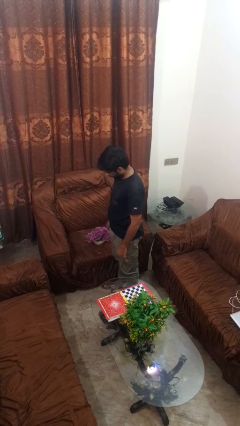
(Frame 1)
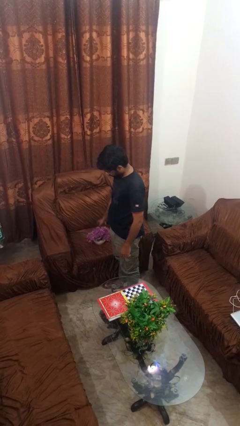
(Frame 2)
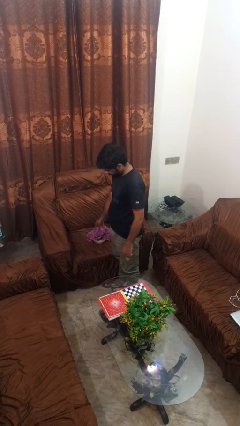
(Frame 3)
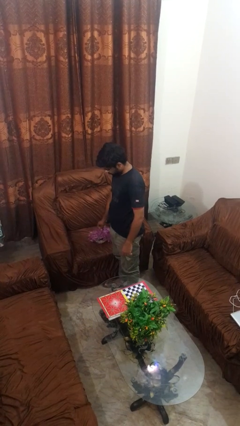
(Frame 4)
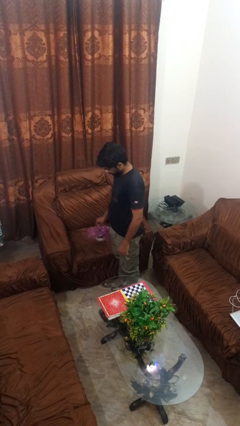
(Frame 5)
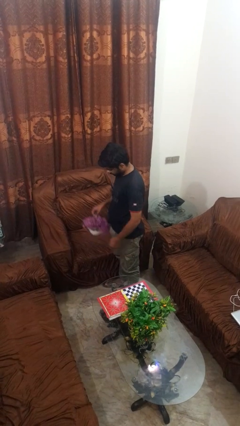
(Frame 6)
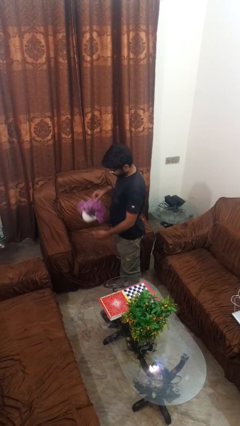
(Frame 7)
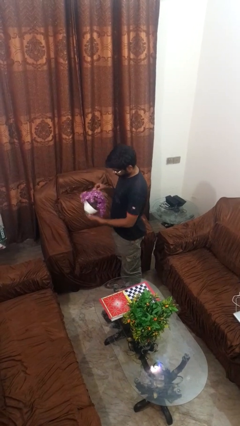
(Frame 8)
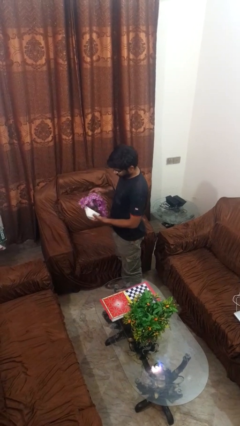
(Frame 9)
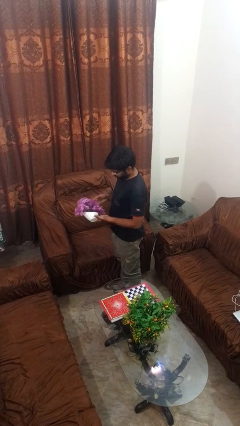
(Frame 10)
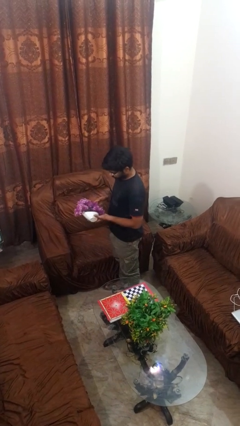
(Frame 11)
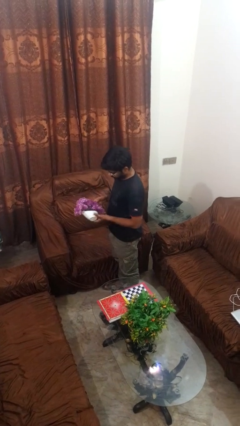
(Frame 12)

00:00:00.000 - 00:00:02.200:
person picks up object from couch

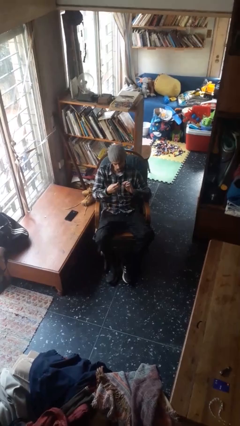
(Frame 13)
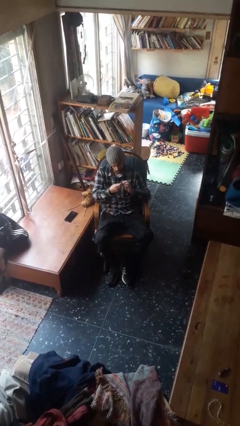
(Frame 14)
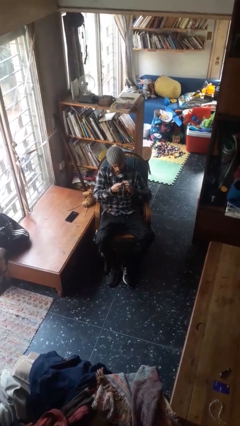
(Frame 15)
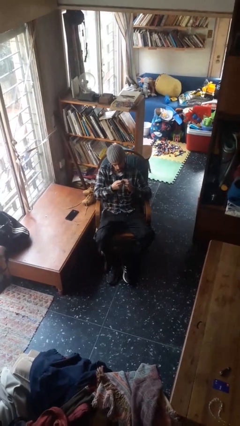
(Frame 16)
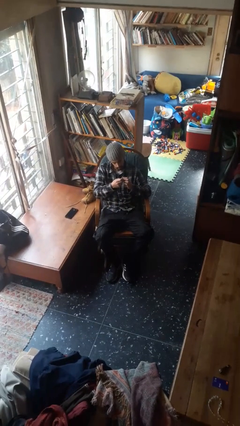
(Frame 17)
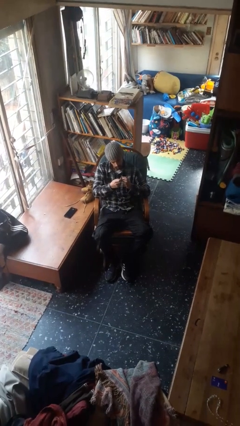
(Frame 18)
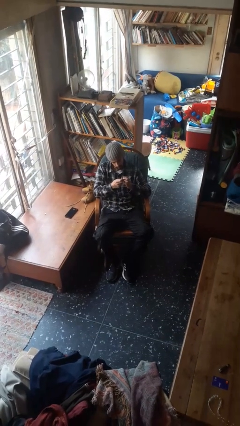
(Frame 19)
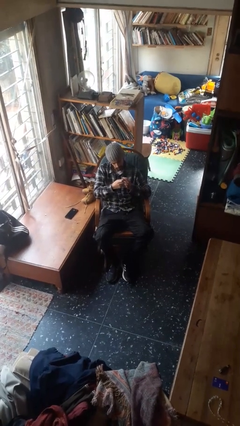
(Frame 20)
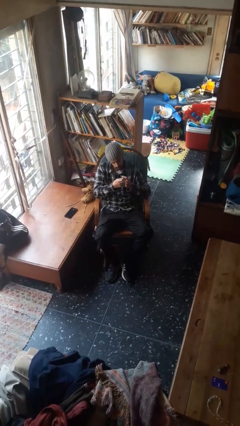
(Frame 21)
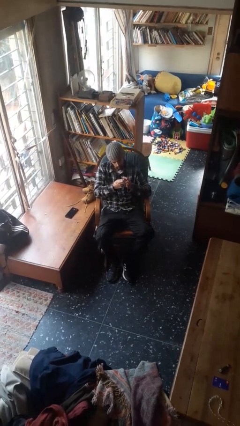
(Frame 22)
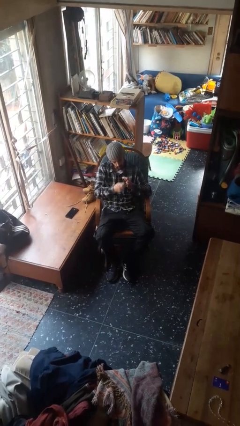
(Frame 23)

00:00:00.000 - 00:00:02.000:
person files fingernails

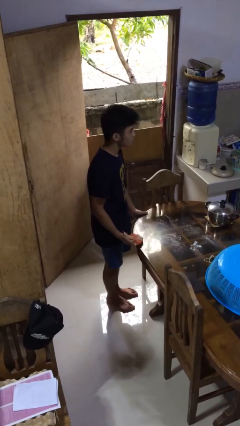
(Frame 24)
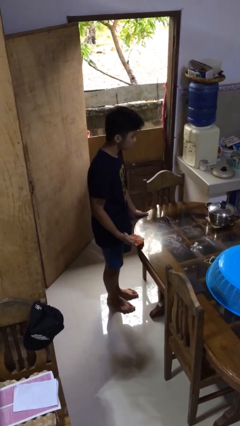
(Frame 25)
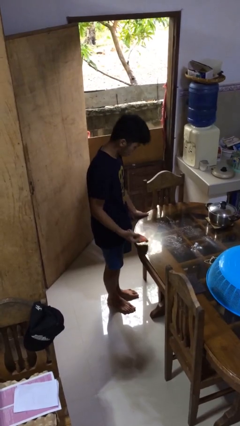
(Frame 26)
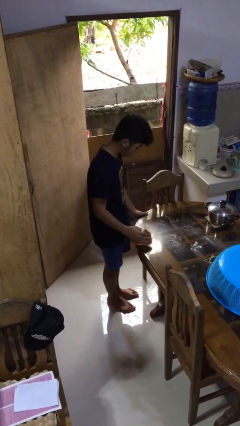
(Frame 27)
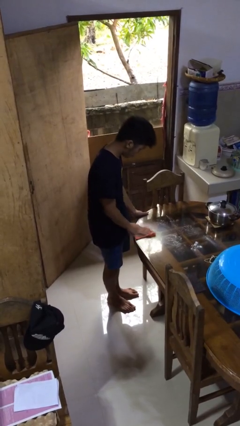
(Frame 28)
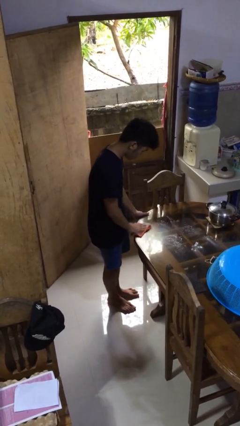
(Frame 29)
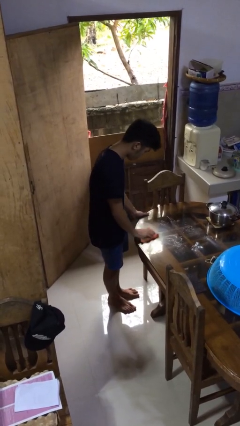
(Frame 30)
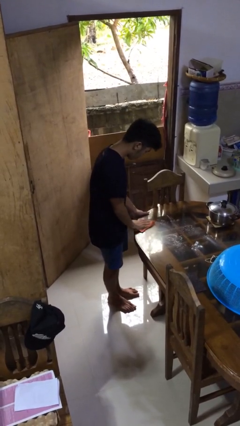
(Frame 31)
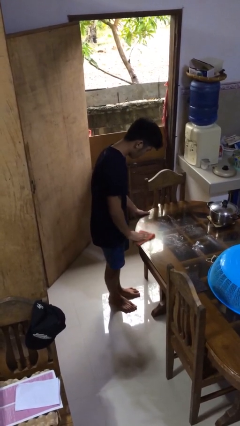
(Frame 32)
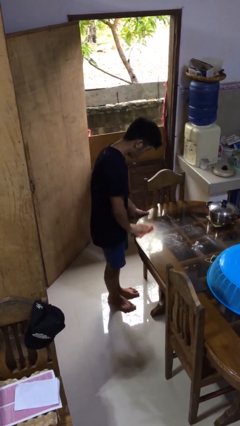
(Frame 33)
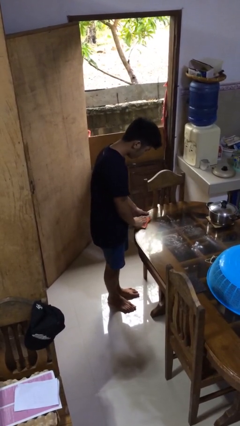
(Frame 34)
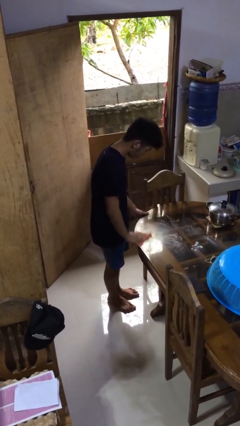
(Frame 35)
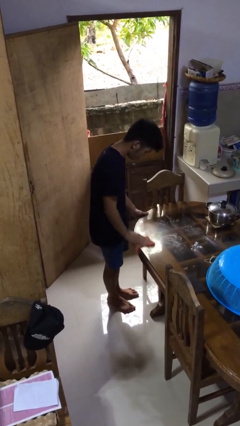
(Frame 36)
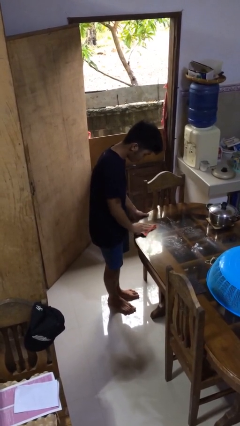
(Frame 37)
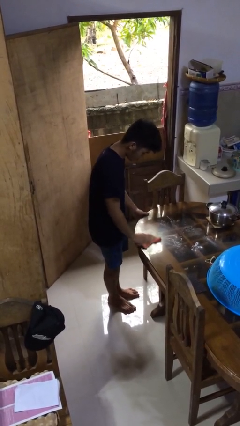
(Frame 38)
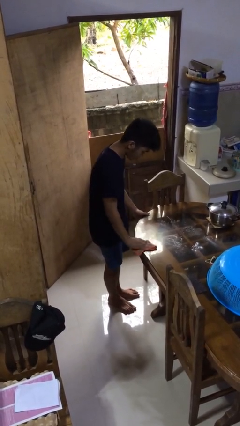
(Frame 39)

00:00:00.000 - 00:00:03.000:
person cleans table with rag

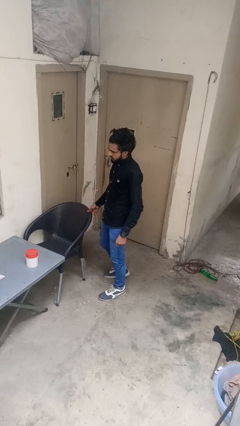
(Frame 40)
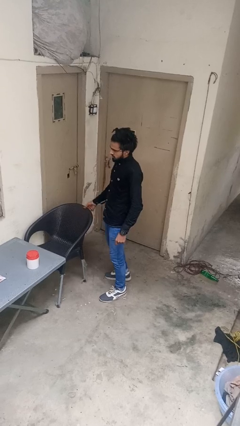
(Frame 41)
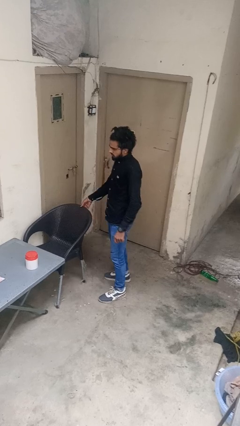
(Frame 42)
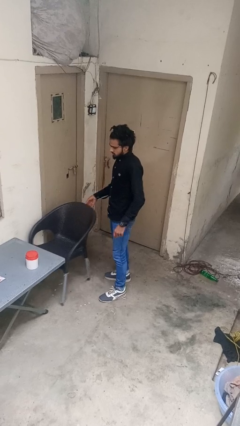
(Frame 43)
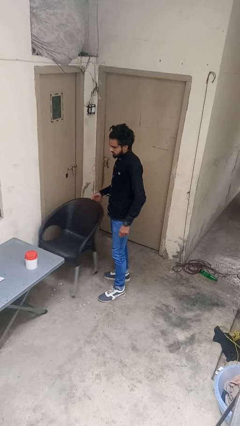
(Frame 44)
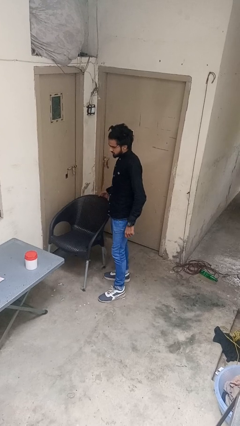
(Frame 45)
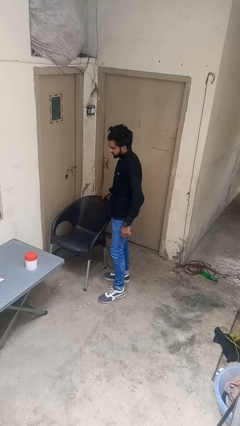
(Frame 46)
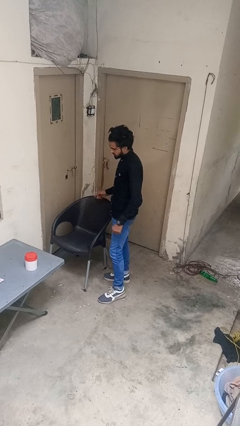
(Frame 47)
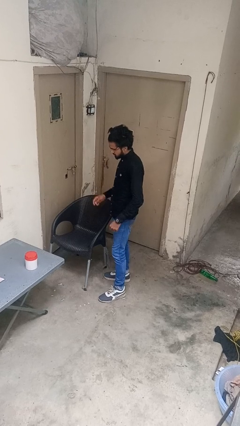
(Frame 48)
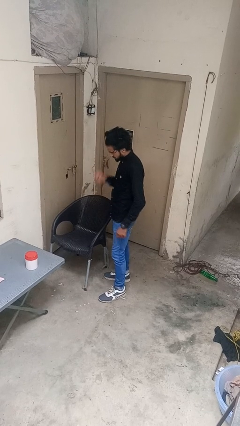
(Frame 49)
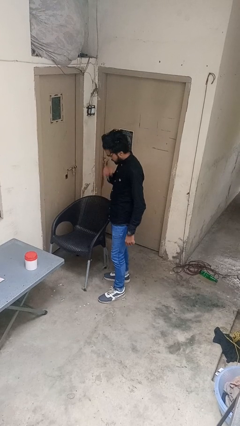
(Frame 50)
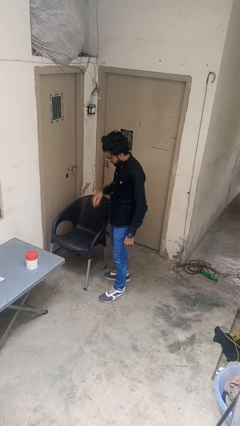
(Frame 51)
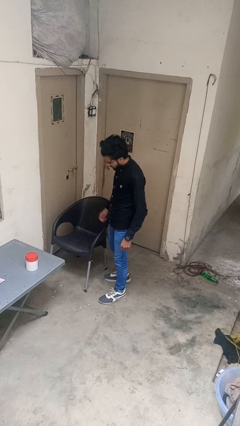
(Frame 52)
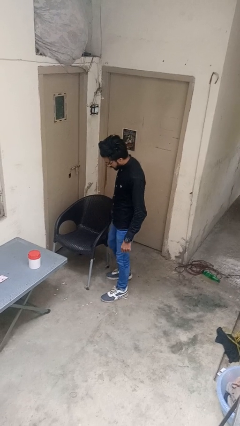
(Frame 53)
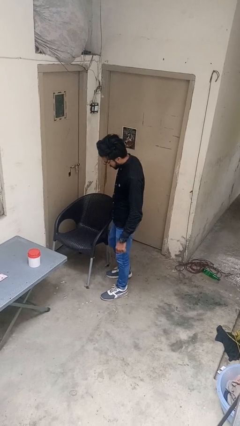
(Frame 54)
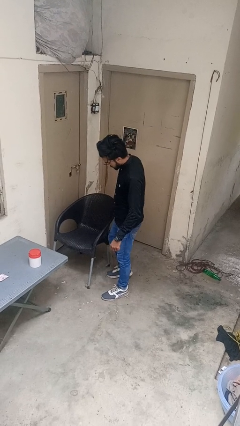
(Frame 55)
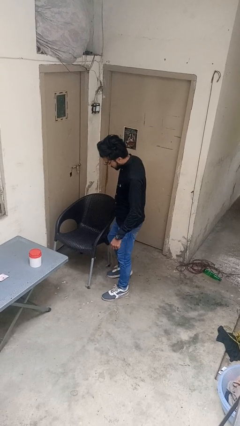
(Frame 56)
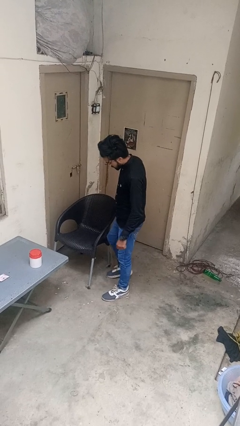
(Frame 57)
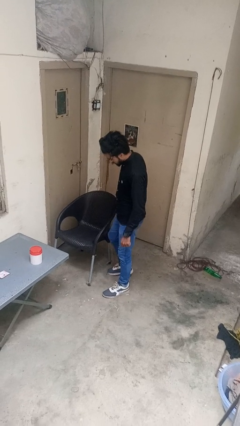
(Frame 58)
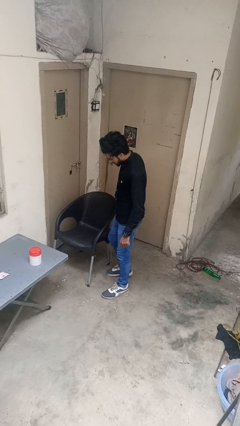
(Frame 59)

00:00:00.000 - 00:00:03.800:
person pulls out chair

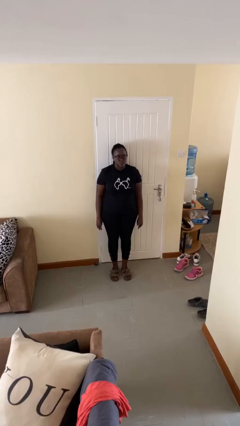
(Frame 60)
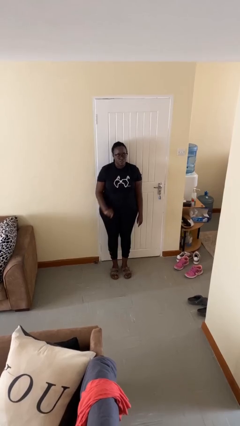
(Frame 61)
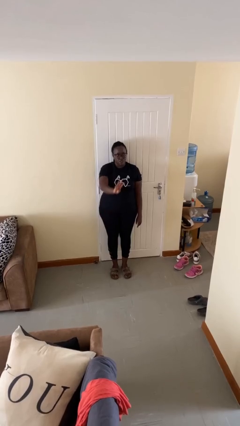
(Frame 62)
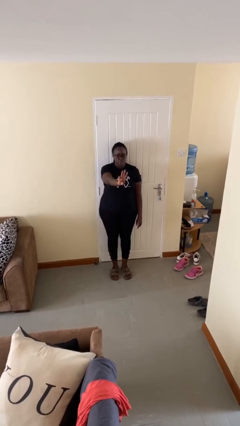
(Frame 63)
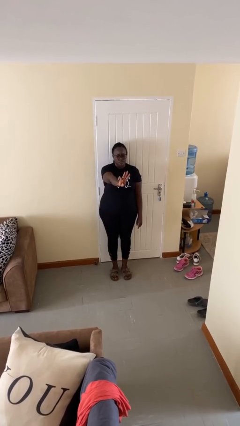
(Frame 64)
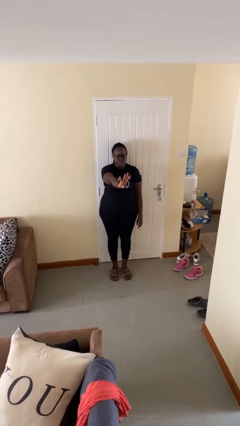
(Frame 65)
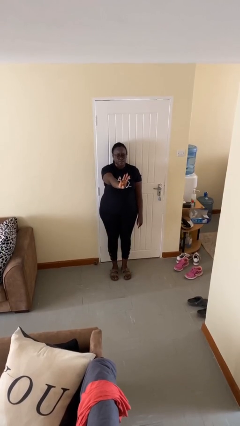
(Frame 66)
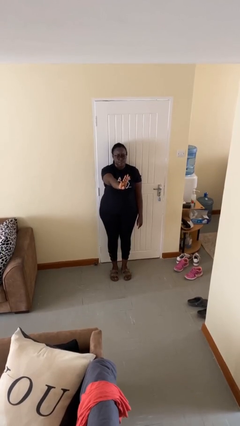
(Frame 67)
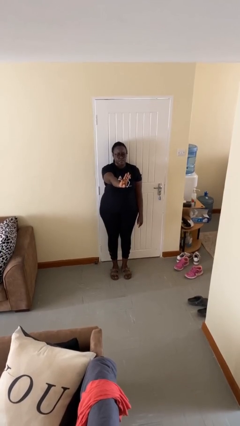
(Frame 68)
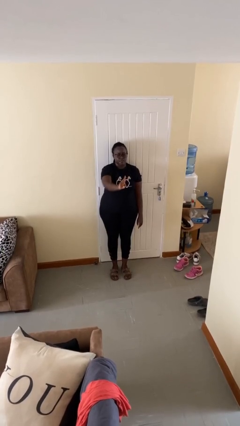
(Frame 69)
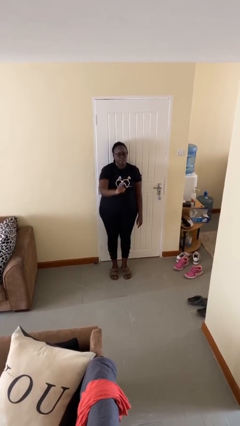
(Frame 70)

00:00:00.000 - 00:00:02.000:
person gestures number three

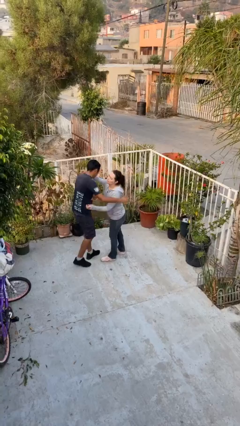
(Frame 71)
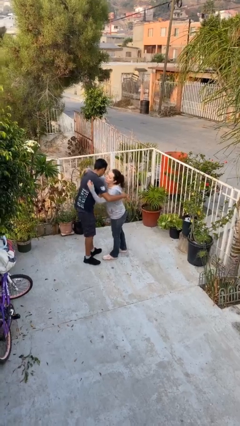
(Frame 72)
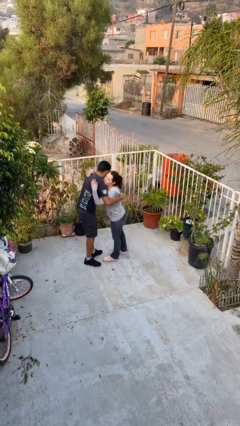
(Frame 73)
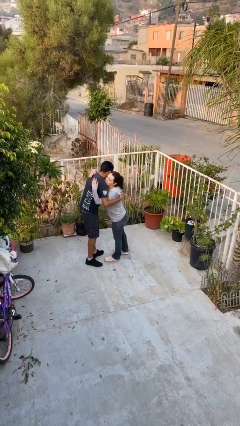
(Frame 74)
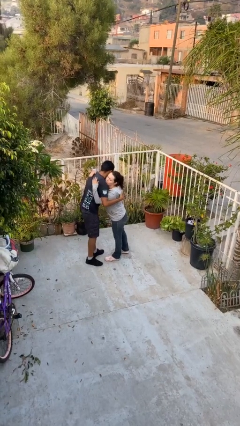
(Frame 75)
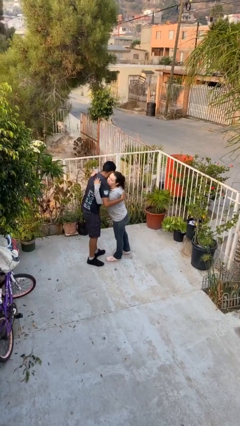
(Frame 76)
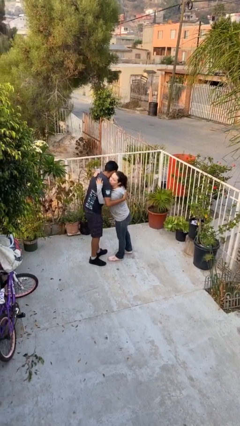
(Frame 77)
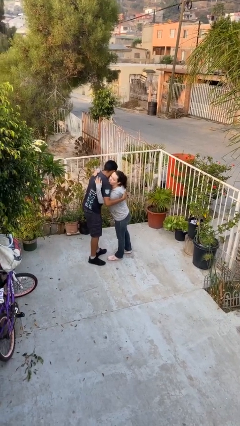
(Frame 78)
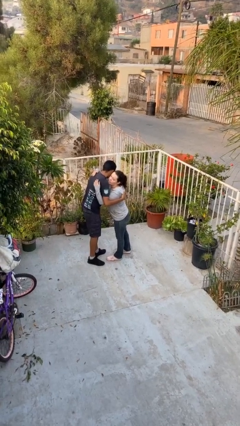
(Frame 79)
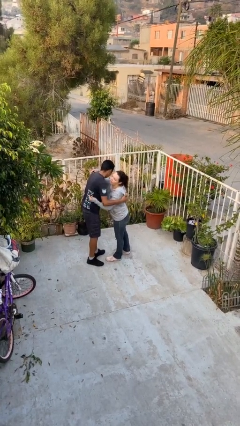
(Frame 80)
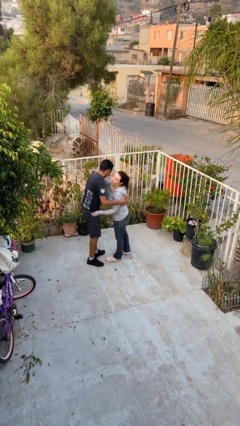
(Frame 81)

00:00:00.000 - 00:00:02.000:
person embraces person

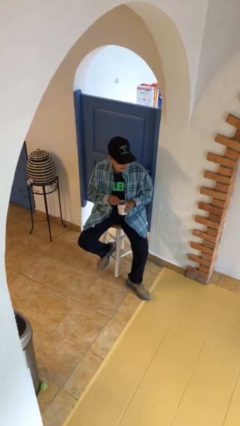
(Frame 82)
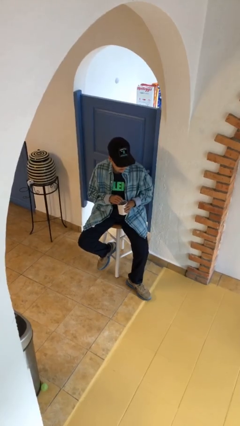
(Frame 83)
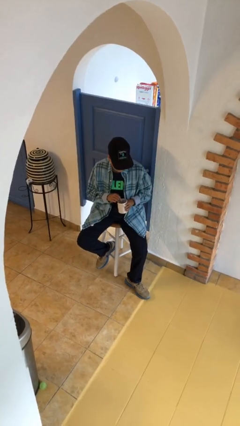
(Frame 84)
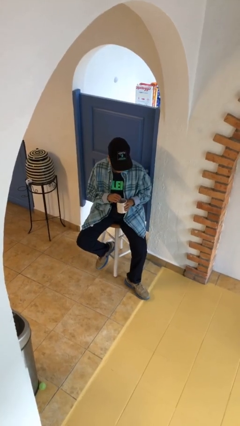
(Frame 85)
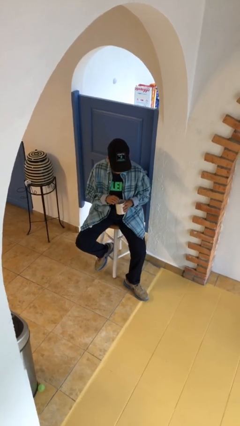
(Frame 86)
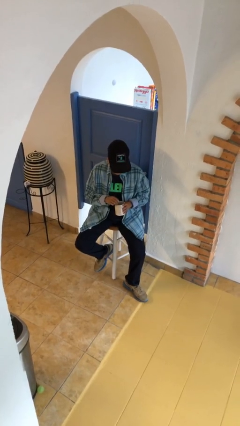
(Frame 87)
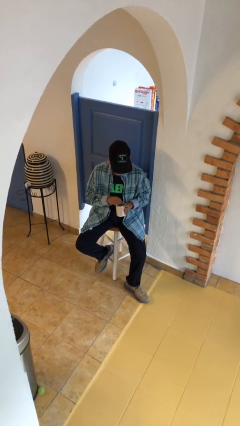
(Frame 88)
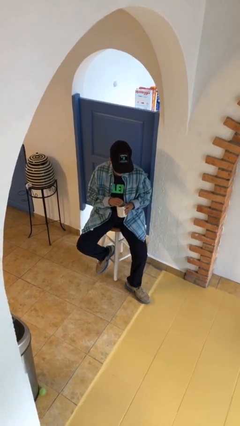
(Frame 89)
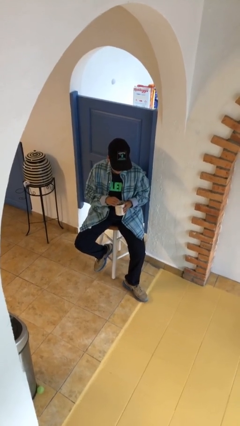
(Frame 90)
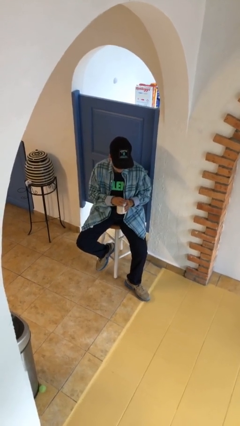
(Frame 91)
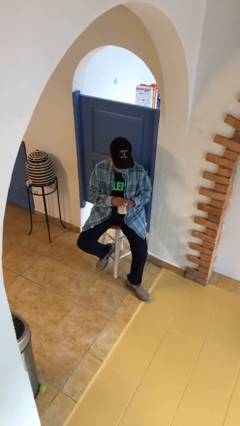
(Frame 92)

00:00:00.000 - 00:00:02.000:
person stirs mug
